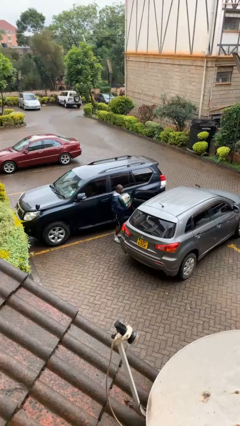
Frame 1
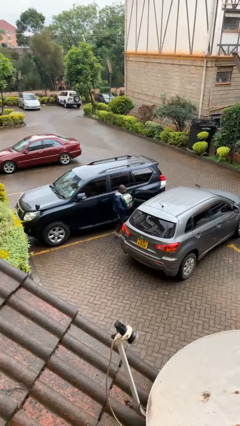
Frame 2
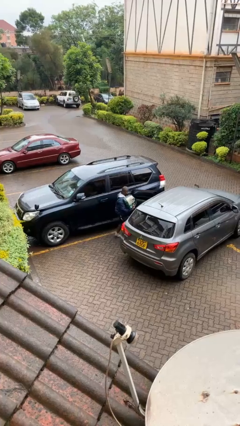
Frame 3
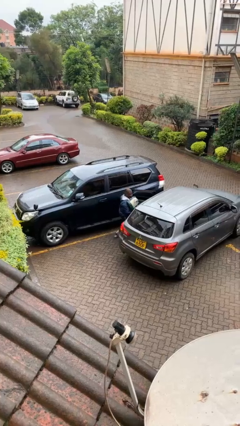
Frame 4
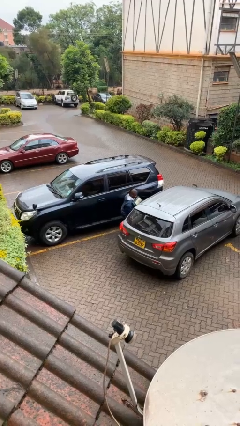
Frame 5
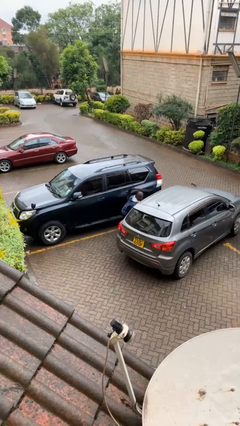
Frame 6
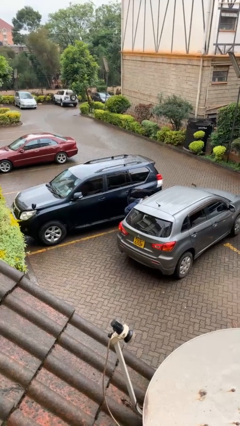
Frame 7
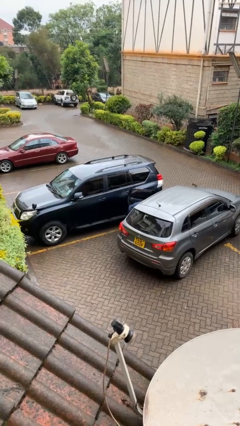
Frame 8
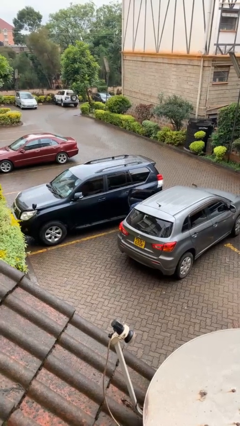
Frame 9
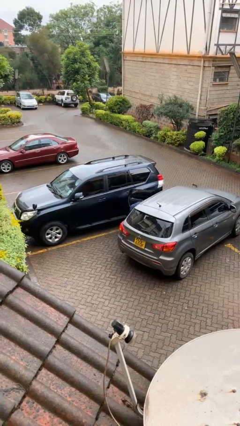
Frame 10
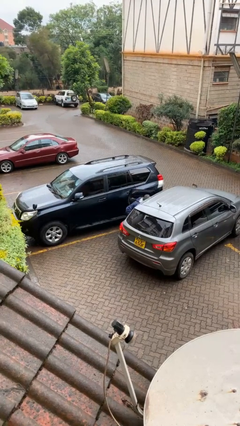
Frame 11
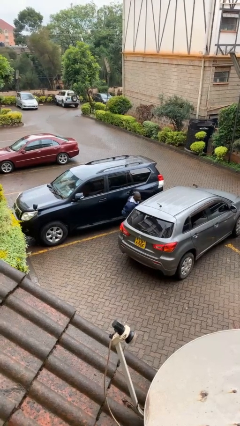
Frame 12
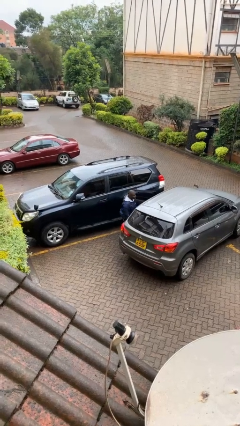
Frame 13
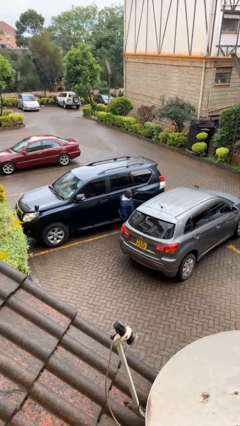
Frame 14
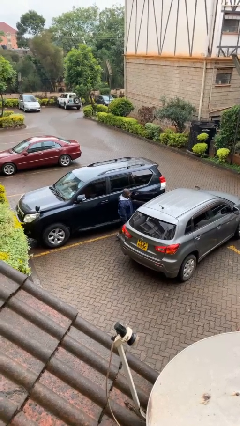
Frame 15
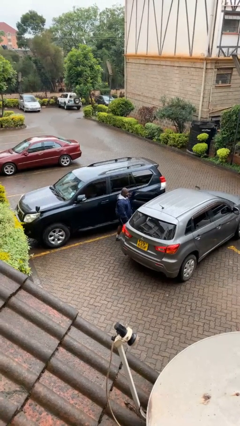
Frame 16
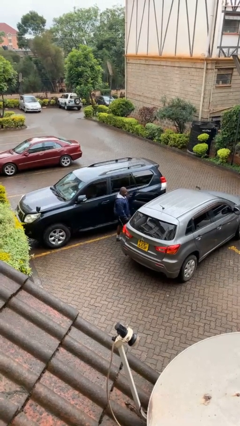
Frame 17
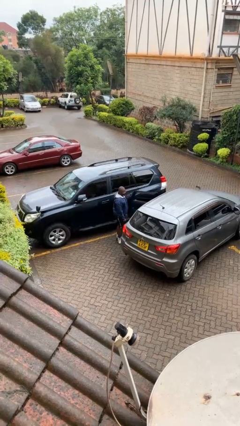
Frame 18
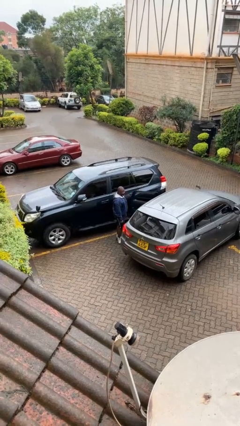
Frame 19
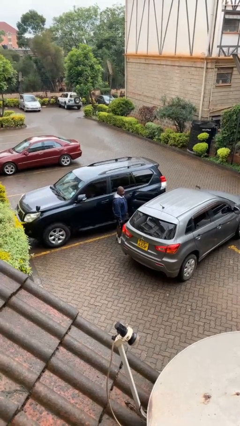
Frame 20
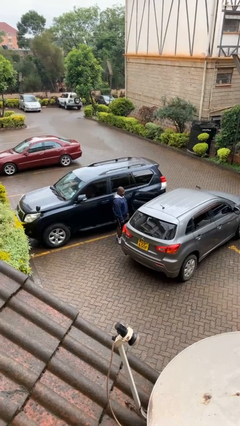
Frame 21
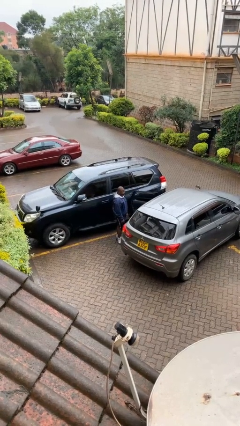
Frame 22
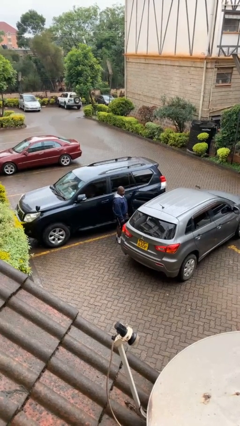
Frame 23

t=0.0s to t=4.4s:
person loads car

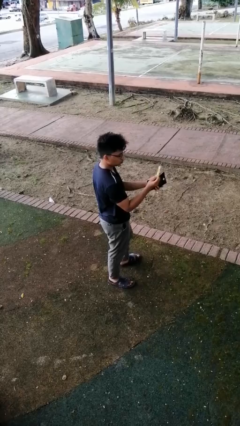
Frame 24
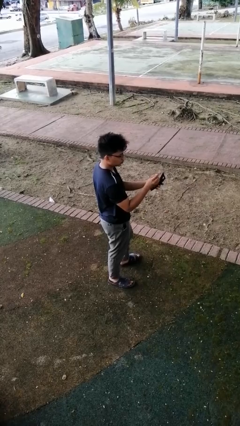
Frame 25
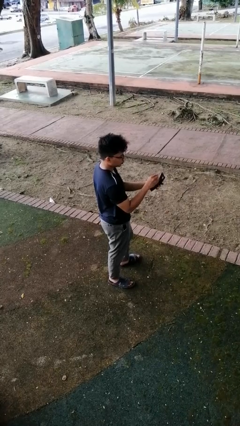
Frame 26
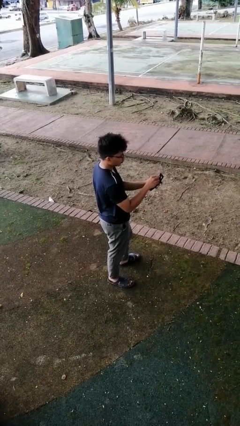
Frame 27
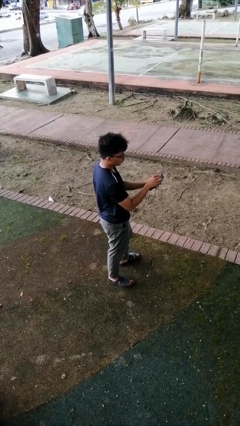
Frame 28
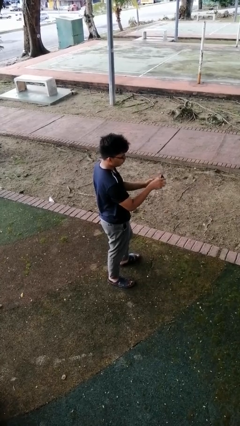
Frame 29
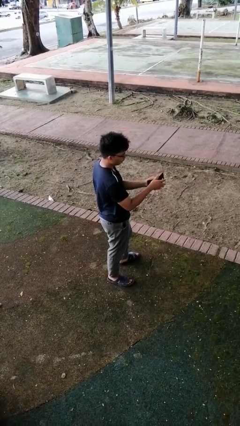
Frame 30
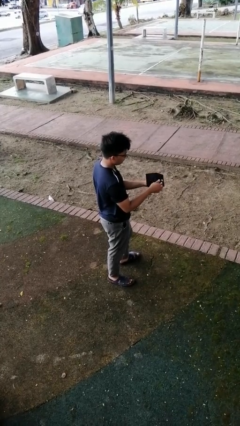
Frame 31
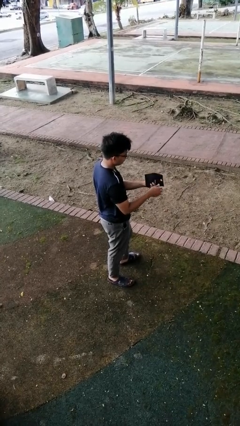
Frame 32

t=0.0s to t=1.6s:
person puts object into purse

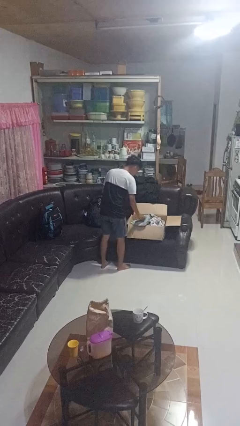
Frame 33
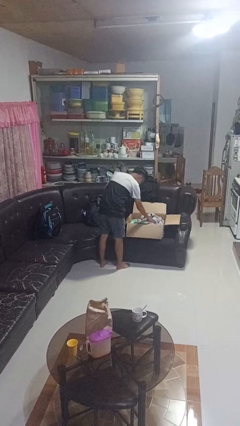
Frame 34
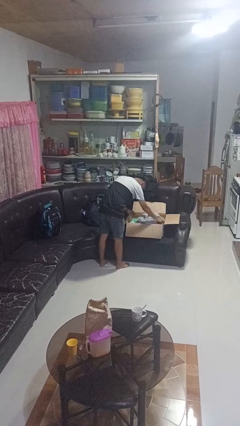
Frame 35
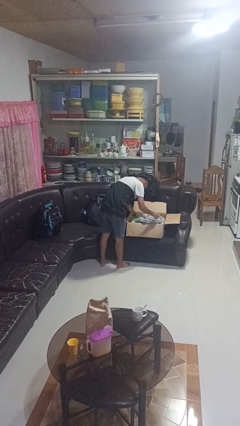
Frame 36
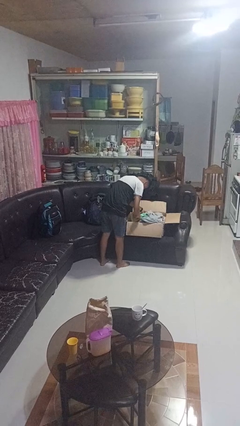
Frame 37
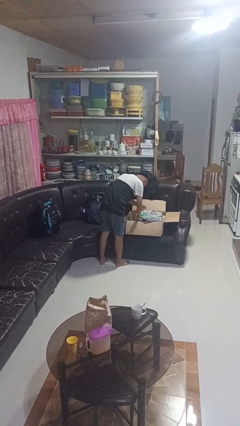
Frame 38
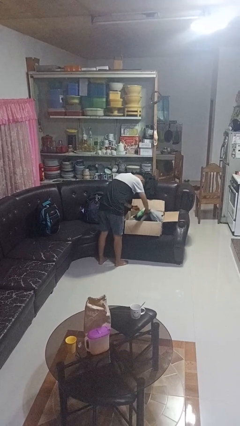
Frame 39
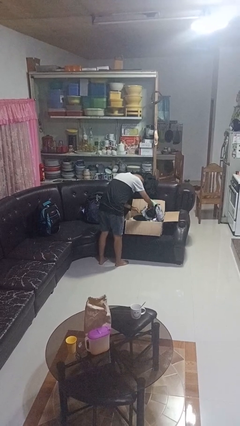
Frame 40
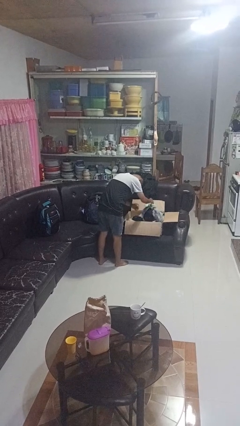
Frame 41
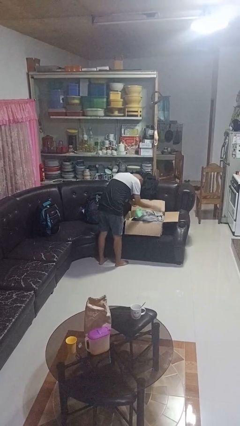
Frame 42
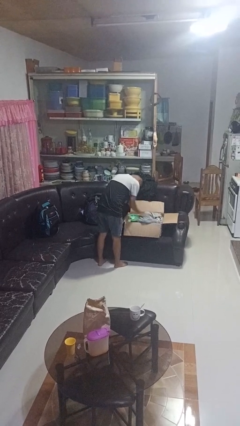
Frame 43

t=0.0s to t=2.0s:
person searches in box

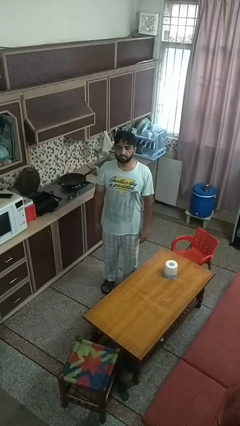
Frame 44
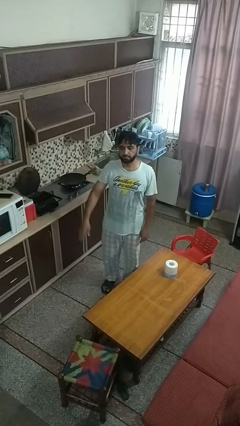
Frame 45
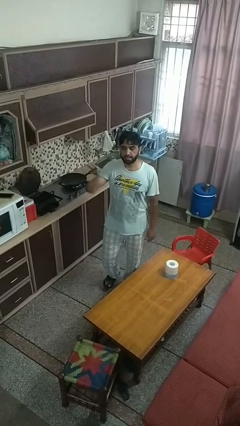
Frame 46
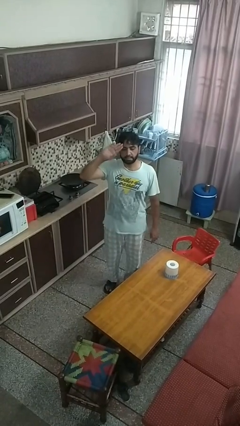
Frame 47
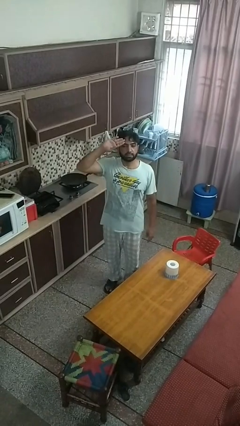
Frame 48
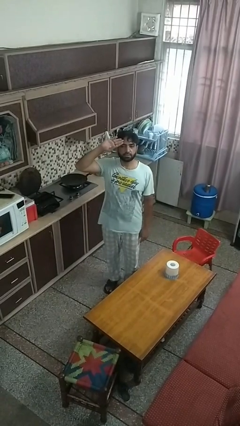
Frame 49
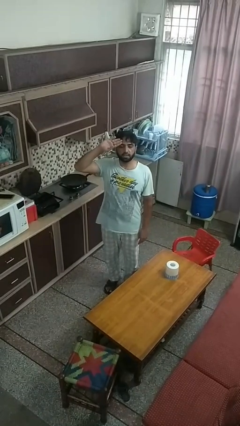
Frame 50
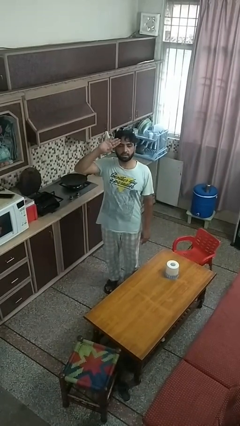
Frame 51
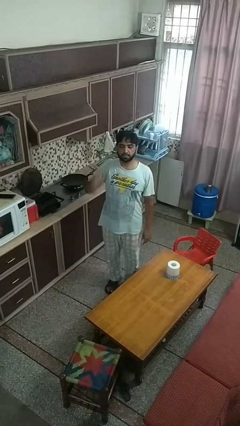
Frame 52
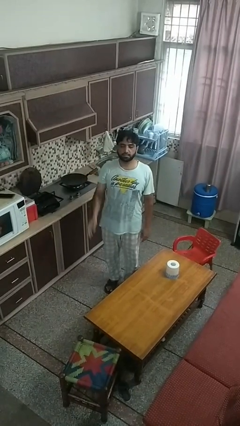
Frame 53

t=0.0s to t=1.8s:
person salutes

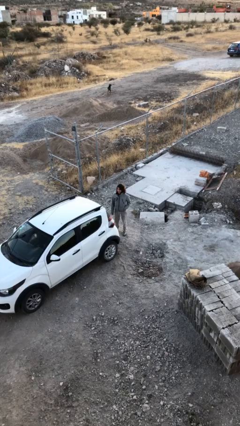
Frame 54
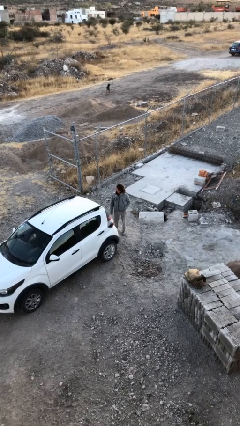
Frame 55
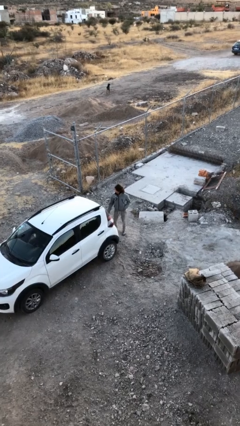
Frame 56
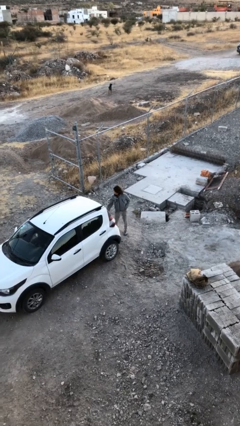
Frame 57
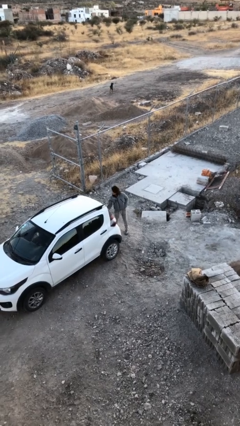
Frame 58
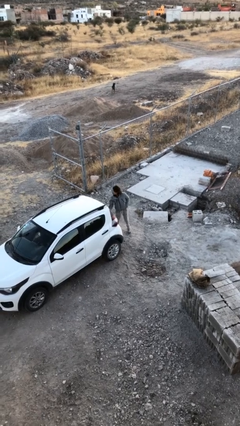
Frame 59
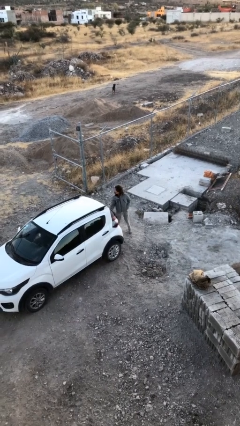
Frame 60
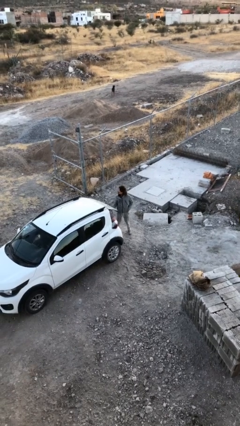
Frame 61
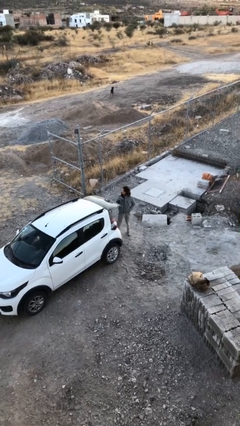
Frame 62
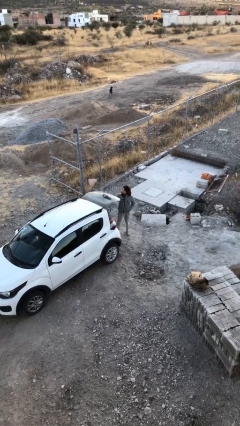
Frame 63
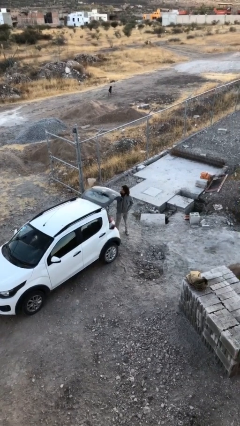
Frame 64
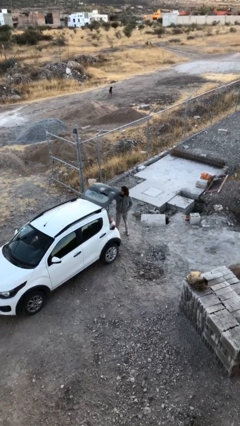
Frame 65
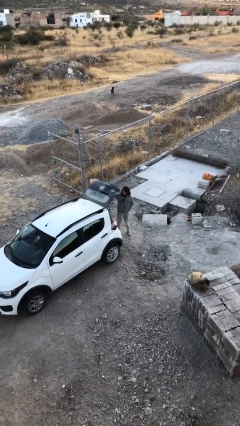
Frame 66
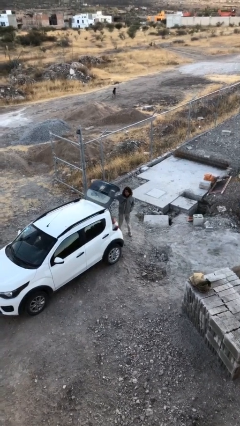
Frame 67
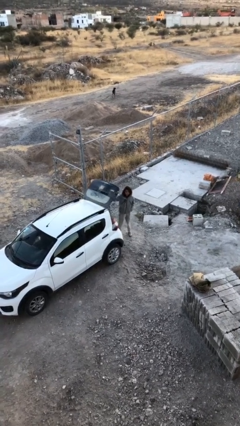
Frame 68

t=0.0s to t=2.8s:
person opens car trunk

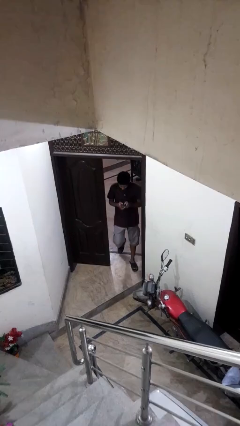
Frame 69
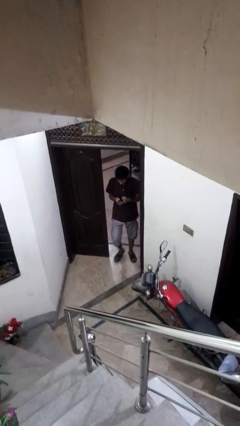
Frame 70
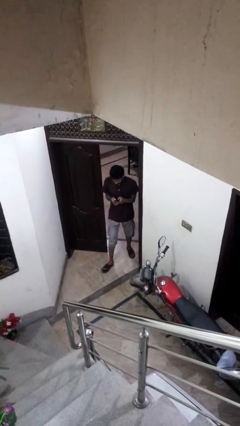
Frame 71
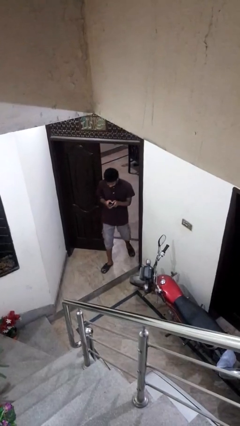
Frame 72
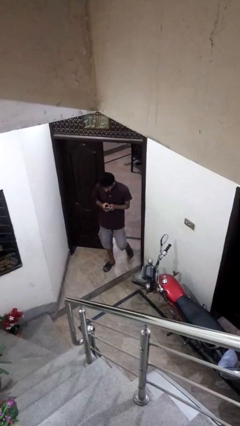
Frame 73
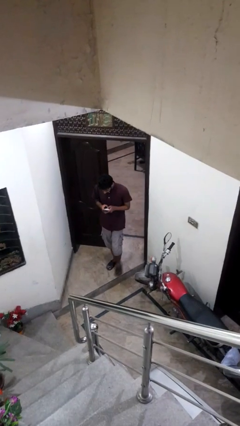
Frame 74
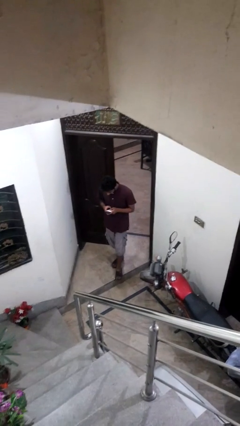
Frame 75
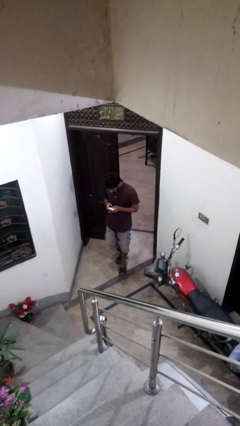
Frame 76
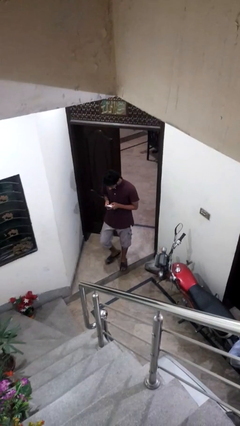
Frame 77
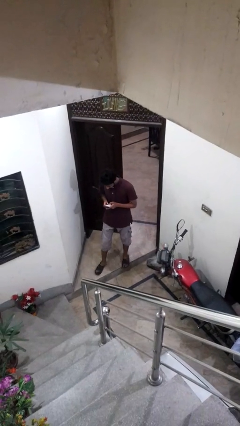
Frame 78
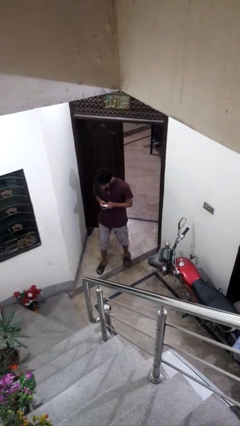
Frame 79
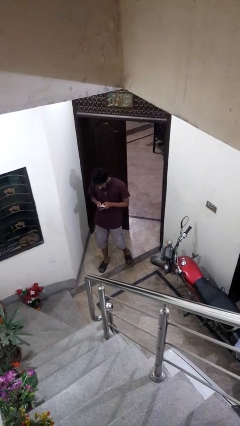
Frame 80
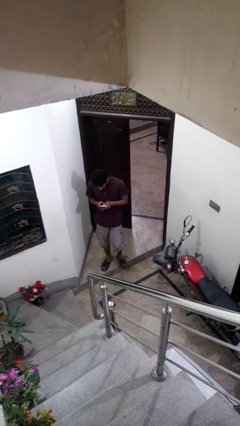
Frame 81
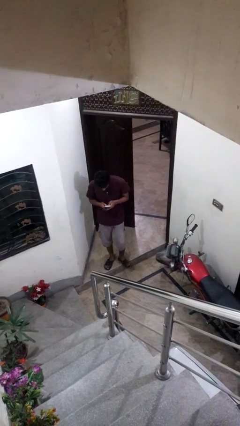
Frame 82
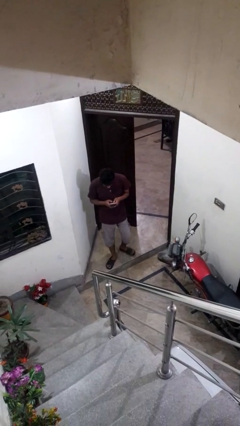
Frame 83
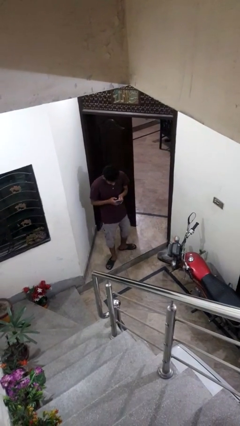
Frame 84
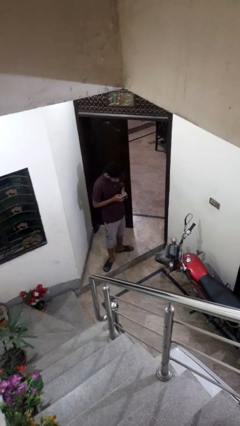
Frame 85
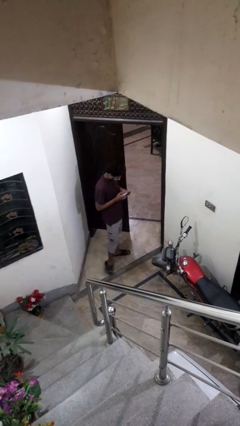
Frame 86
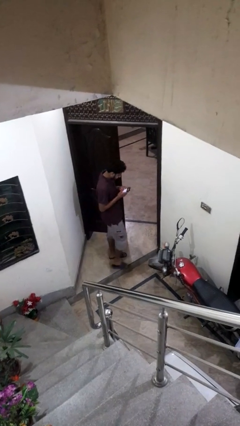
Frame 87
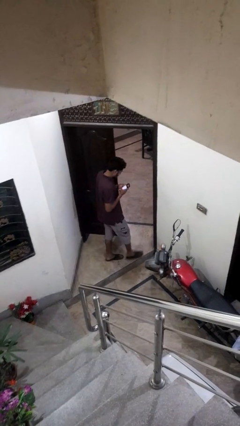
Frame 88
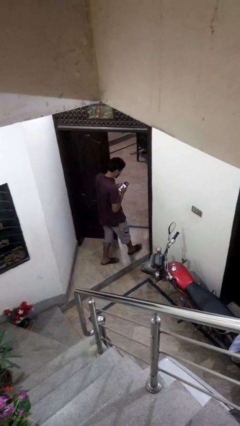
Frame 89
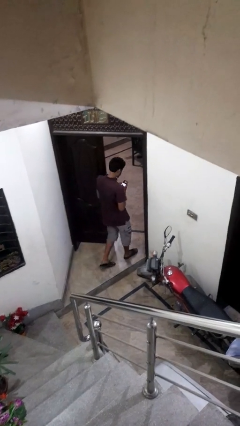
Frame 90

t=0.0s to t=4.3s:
person enters scene through structure

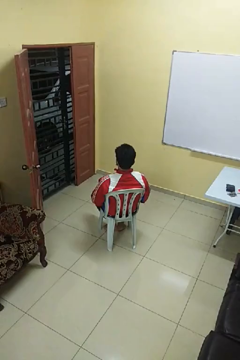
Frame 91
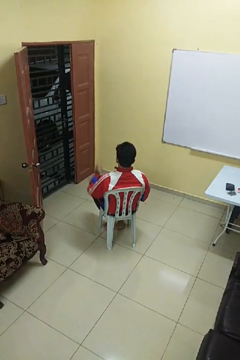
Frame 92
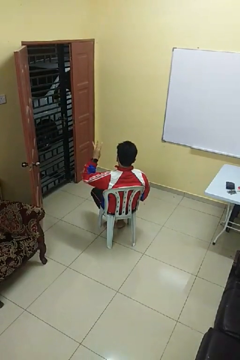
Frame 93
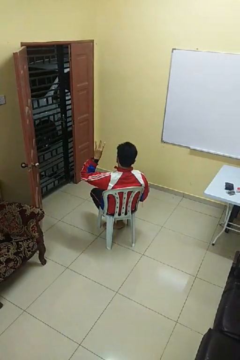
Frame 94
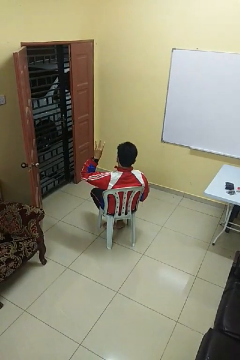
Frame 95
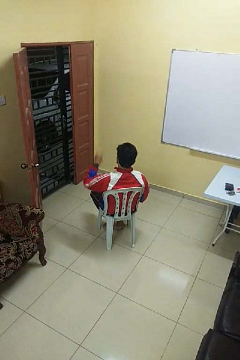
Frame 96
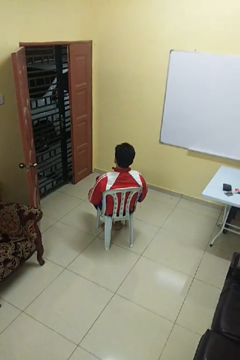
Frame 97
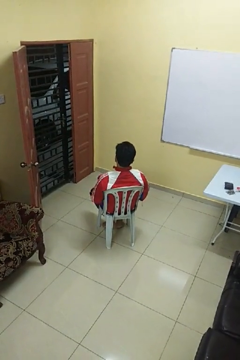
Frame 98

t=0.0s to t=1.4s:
person gestures number three
